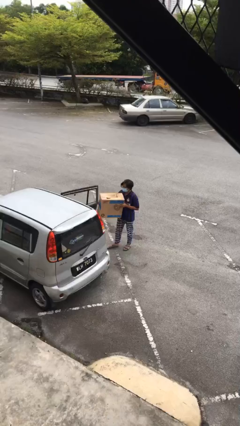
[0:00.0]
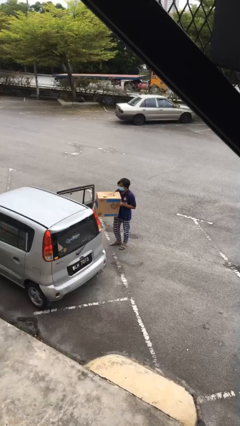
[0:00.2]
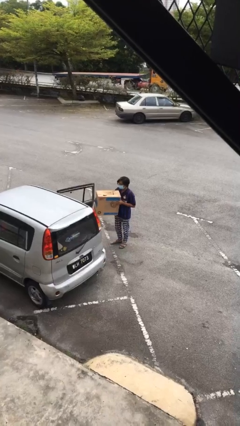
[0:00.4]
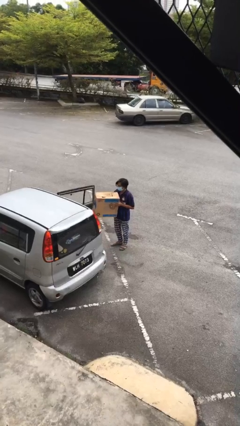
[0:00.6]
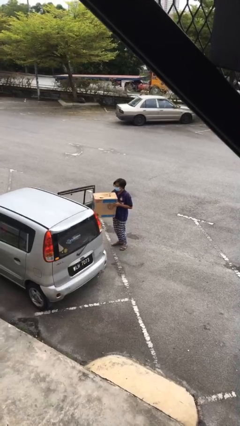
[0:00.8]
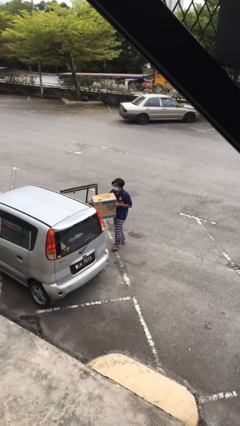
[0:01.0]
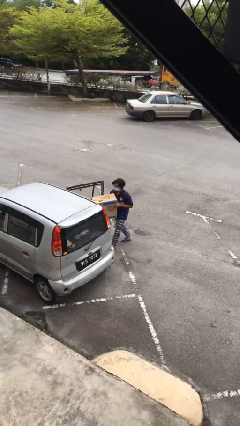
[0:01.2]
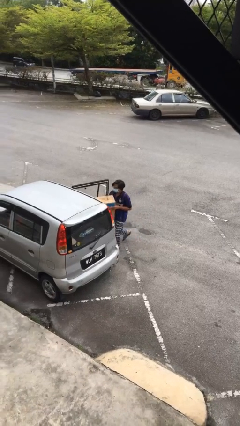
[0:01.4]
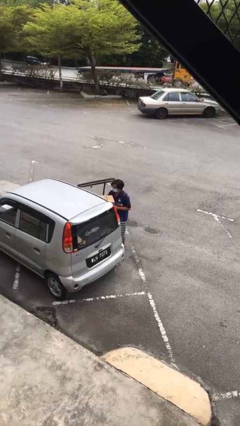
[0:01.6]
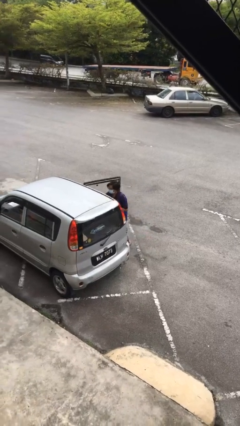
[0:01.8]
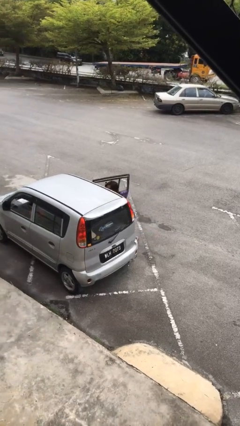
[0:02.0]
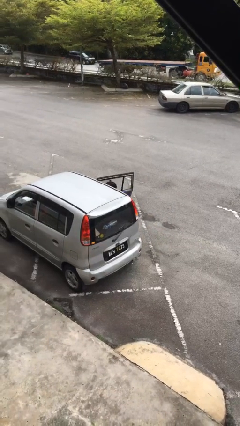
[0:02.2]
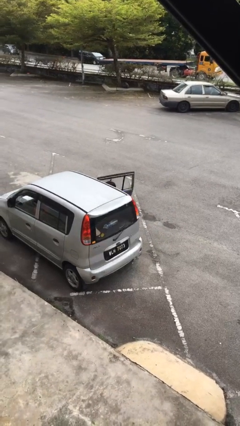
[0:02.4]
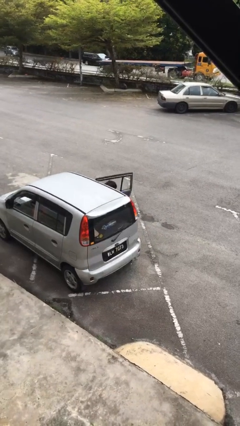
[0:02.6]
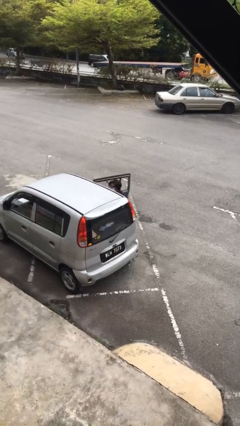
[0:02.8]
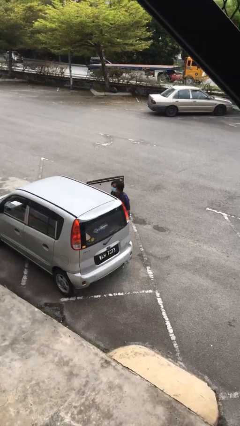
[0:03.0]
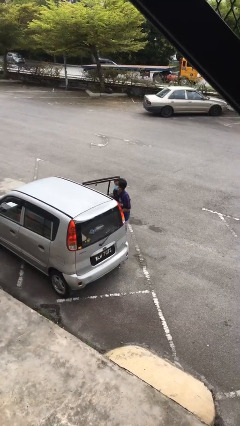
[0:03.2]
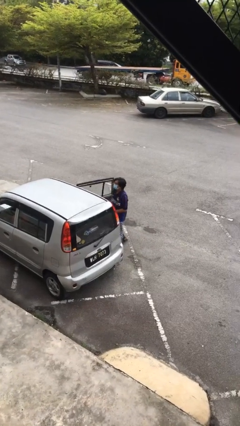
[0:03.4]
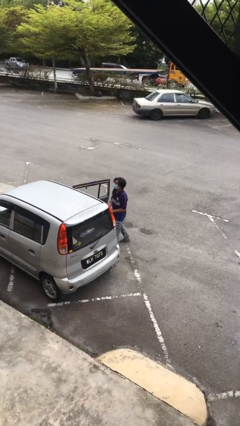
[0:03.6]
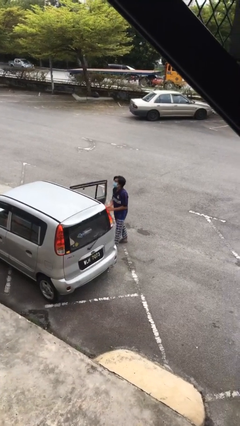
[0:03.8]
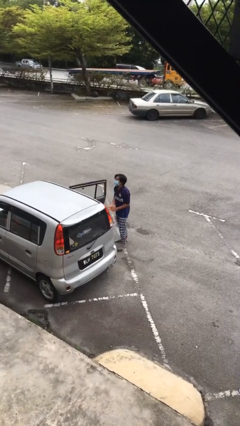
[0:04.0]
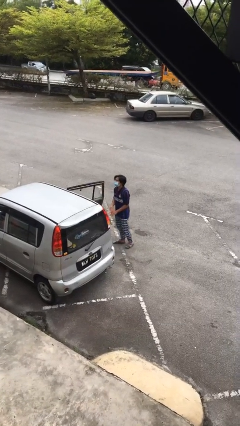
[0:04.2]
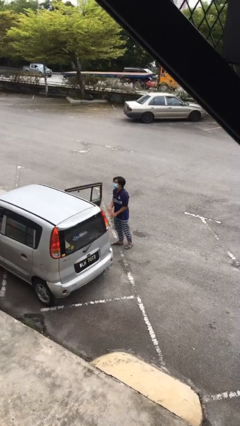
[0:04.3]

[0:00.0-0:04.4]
person loads car

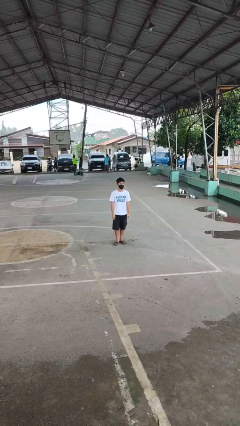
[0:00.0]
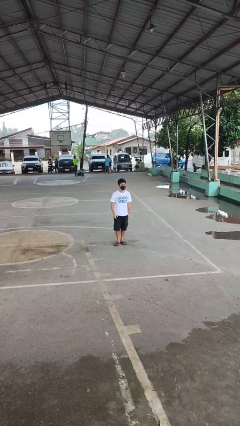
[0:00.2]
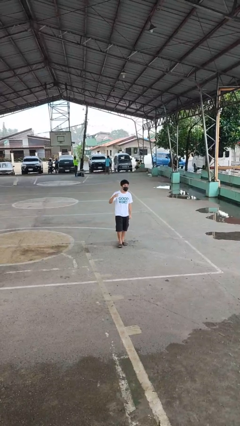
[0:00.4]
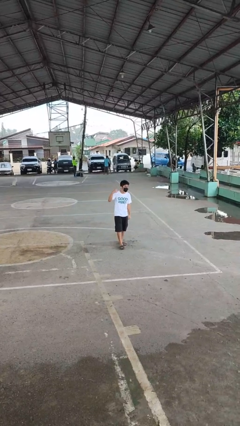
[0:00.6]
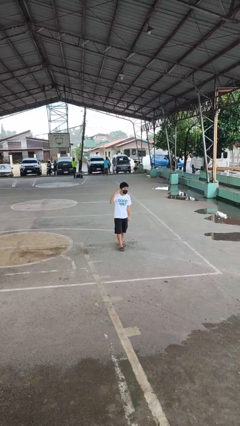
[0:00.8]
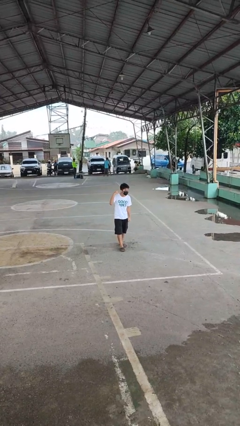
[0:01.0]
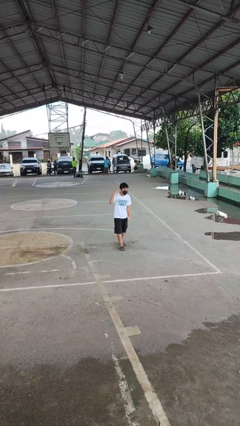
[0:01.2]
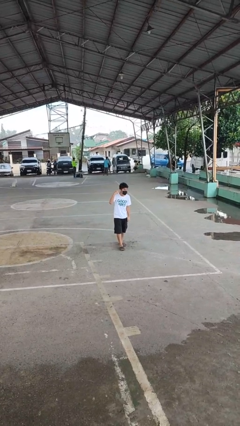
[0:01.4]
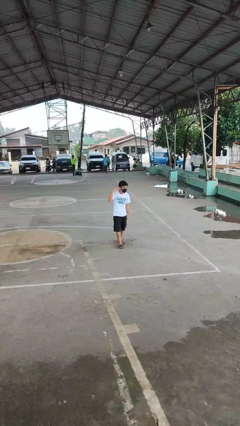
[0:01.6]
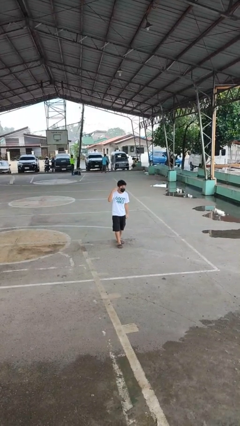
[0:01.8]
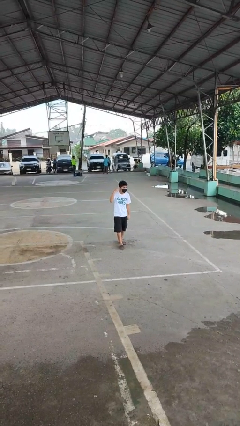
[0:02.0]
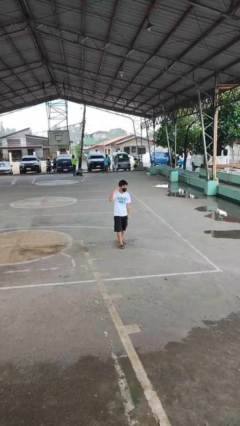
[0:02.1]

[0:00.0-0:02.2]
person gestures listen closely

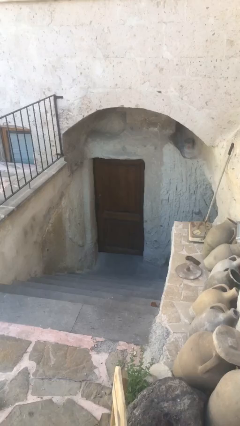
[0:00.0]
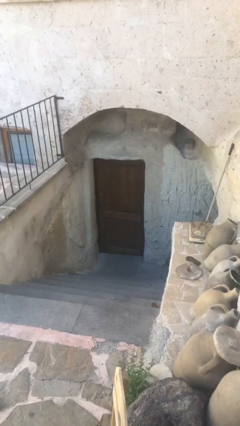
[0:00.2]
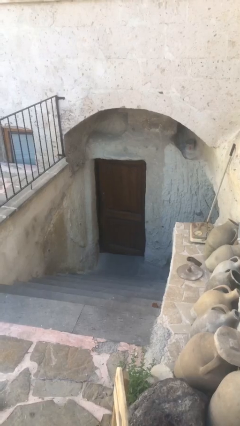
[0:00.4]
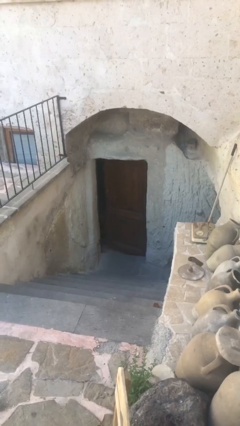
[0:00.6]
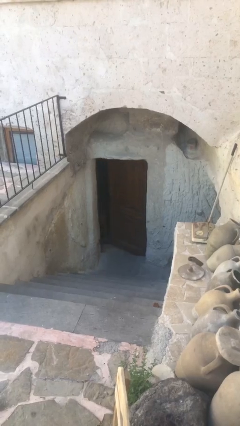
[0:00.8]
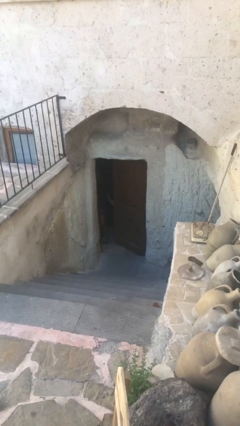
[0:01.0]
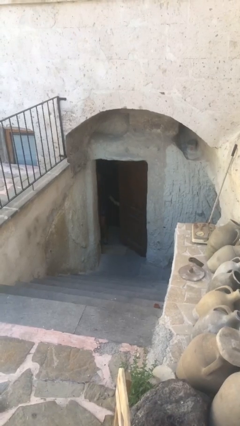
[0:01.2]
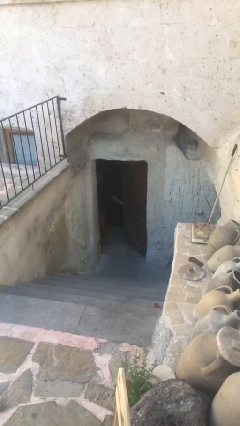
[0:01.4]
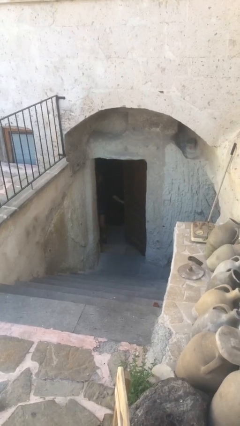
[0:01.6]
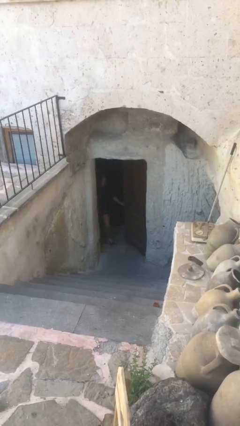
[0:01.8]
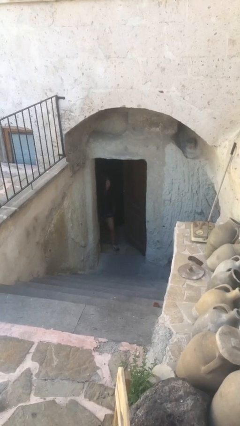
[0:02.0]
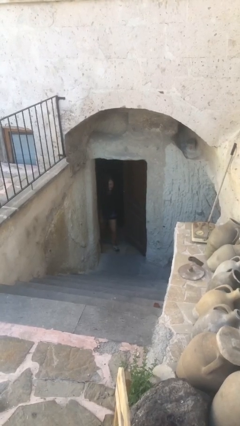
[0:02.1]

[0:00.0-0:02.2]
person opens facility door

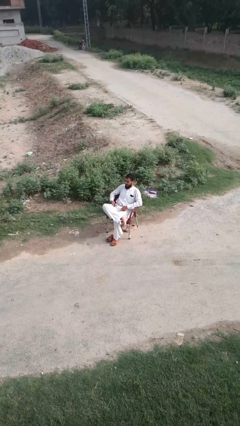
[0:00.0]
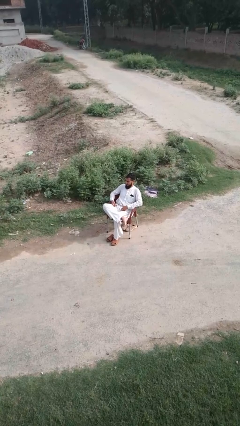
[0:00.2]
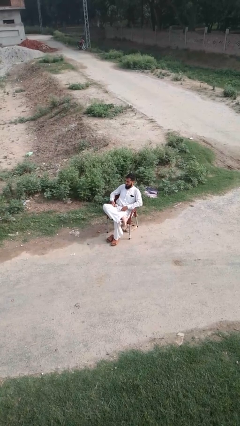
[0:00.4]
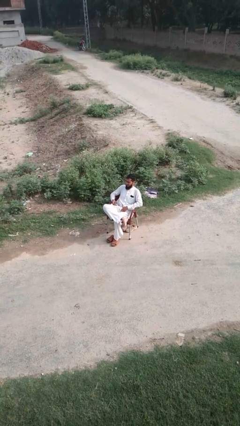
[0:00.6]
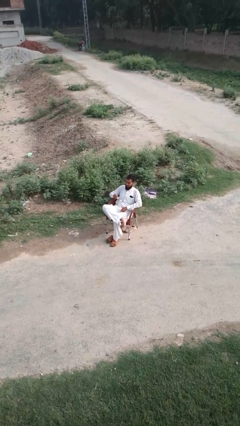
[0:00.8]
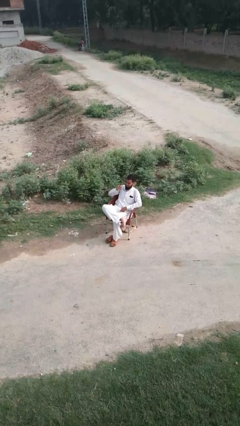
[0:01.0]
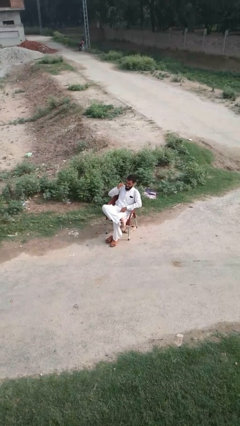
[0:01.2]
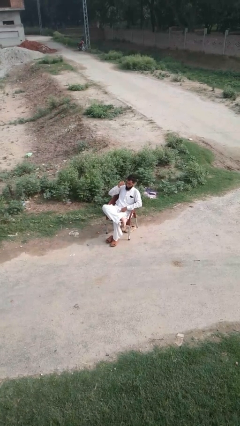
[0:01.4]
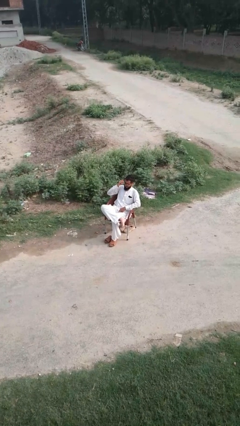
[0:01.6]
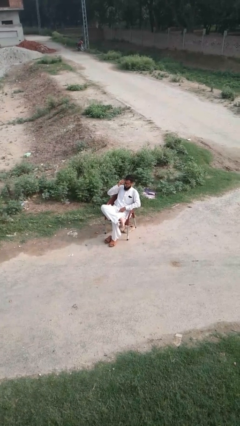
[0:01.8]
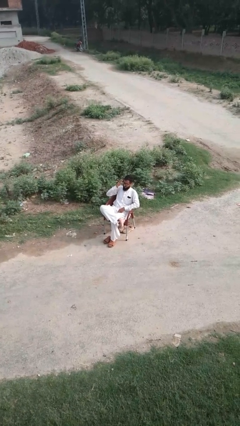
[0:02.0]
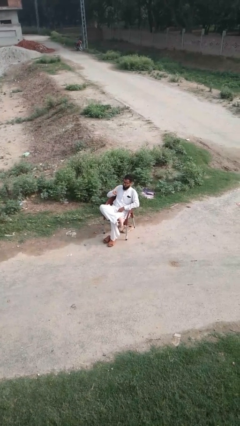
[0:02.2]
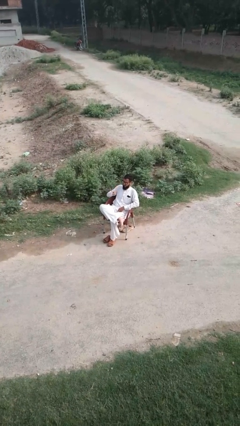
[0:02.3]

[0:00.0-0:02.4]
person puts on glasses

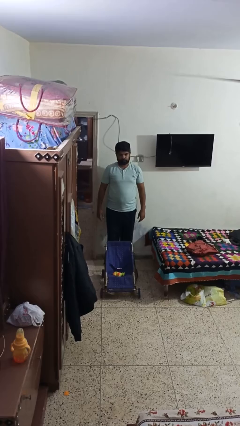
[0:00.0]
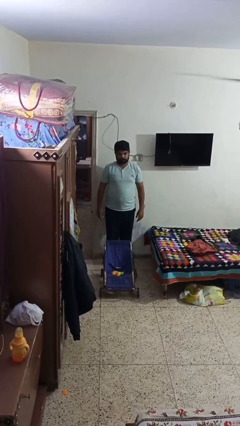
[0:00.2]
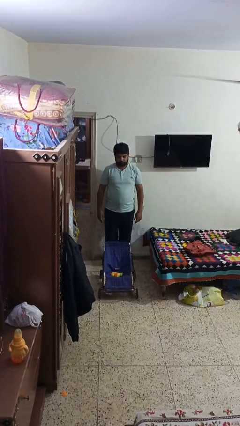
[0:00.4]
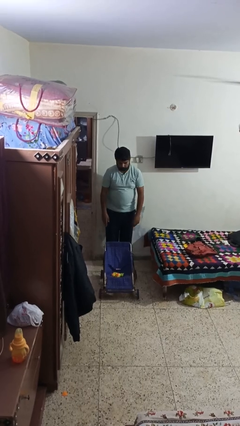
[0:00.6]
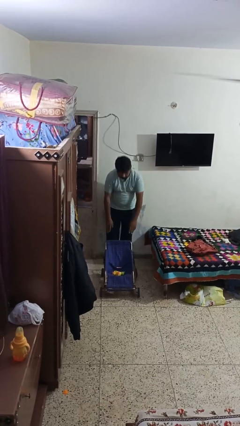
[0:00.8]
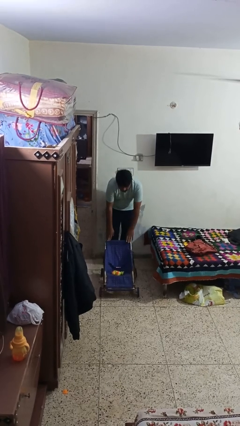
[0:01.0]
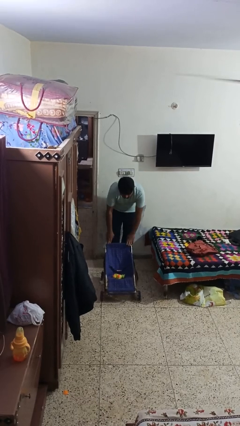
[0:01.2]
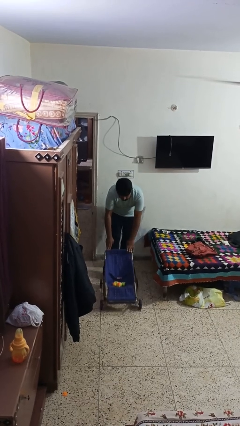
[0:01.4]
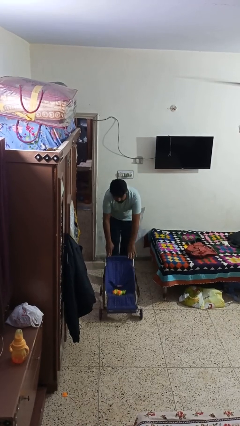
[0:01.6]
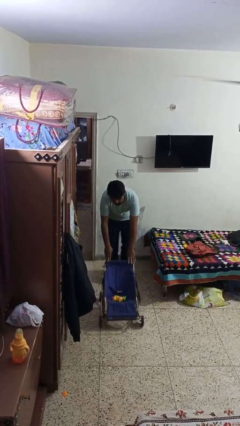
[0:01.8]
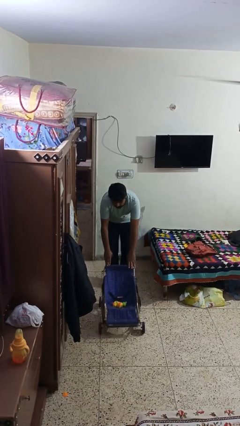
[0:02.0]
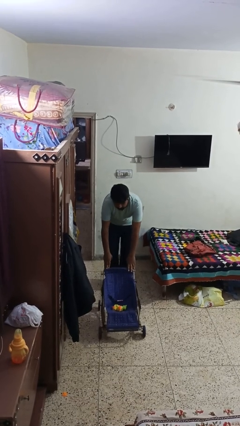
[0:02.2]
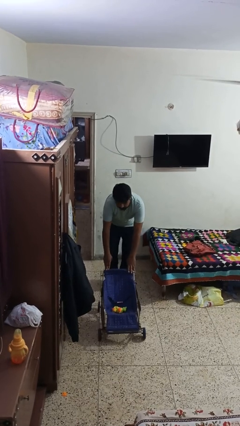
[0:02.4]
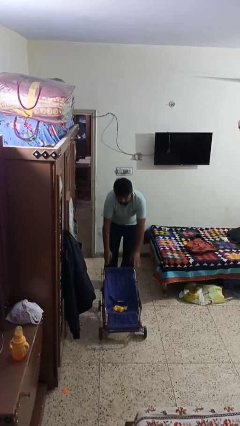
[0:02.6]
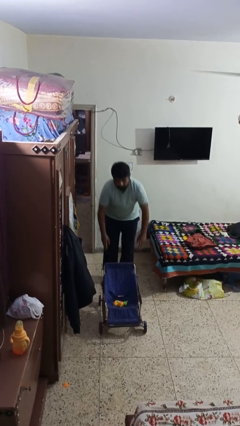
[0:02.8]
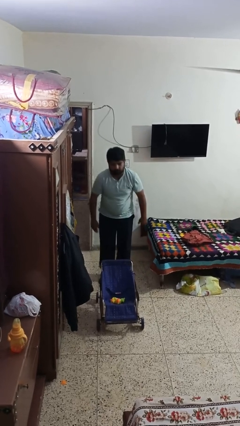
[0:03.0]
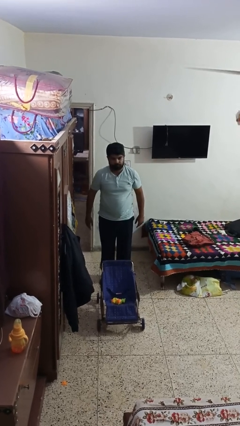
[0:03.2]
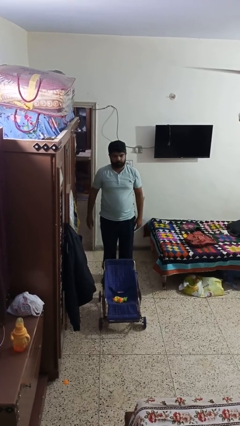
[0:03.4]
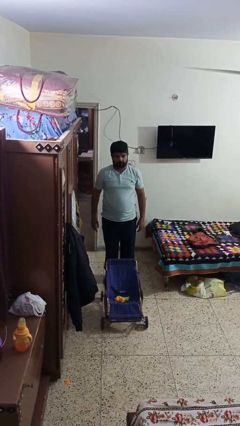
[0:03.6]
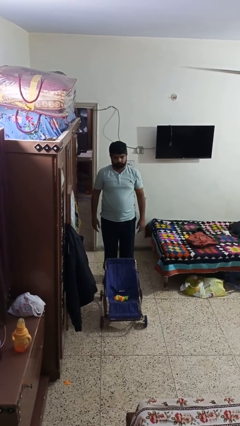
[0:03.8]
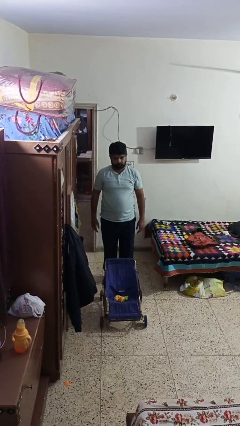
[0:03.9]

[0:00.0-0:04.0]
person pushes wheeled cart

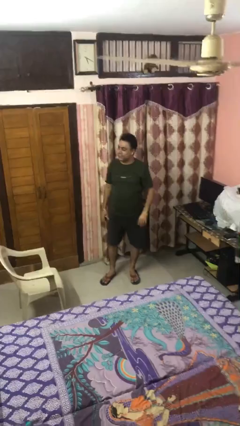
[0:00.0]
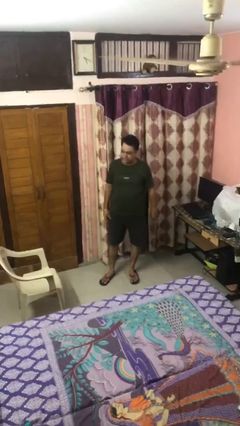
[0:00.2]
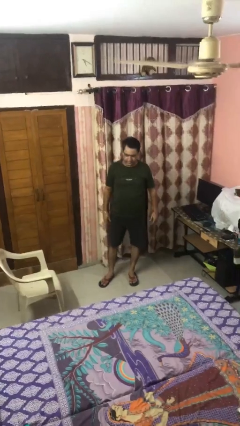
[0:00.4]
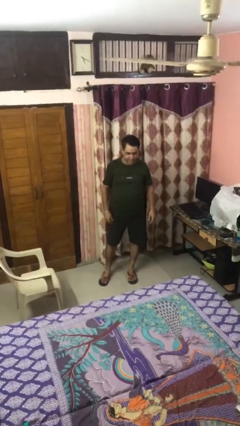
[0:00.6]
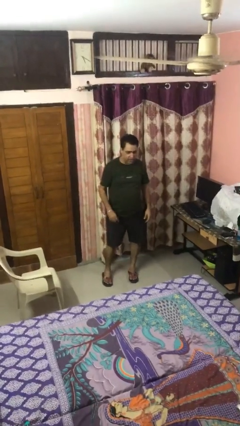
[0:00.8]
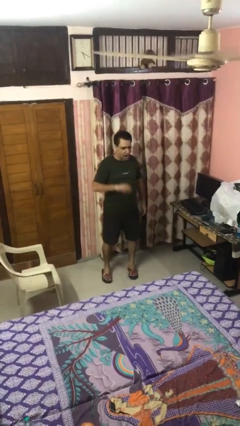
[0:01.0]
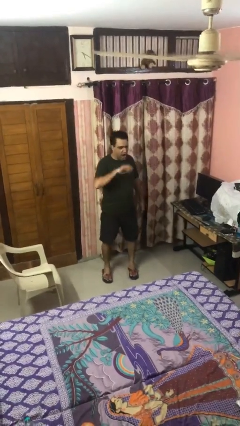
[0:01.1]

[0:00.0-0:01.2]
person yawns

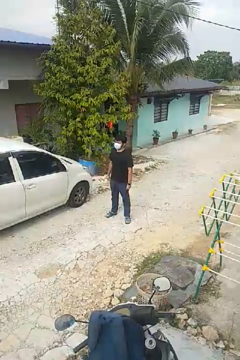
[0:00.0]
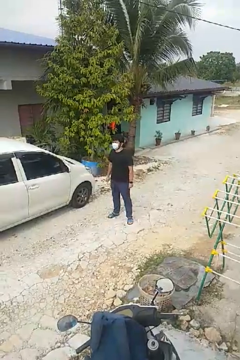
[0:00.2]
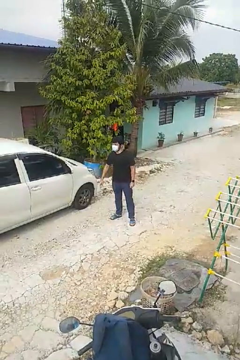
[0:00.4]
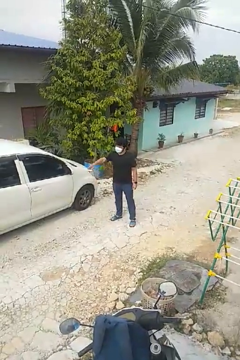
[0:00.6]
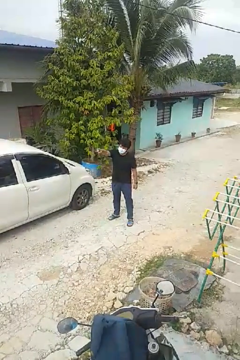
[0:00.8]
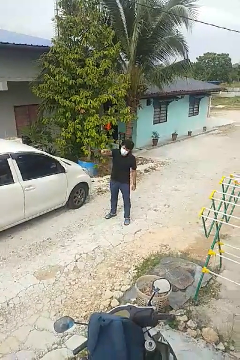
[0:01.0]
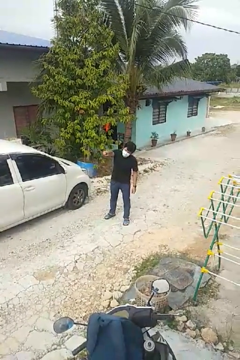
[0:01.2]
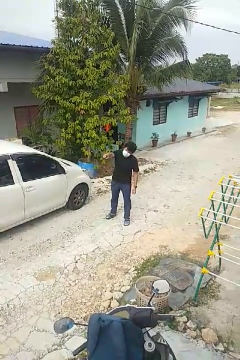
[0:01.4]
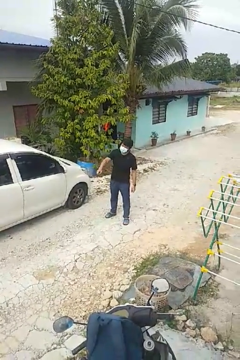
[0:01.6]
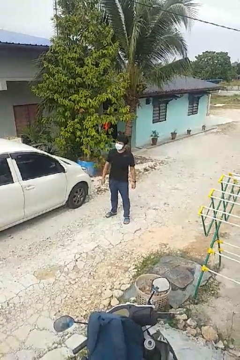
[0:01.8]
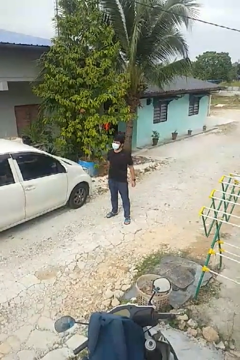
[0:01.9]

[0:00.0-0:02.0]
person points at person
